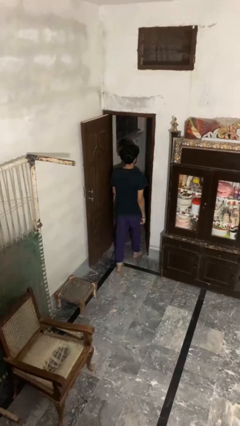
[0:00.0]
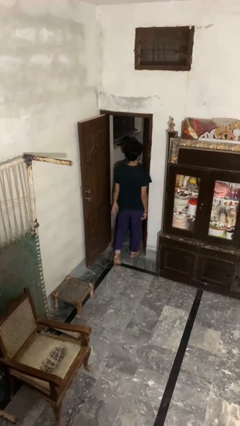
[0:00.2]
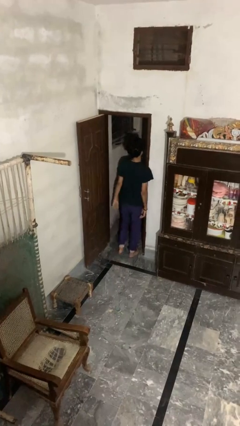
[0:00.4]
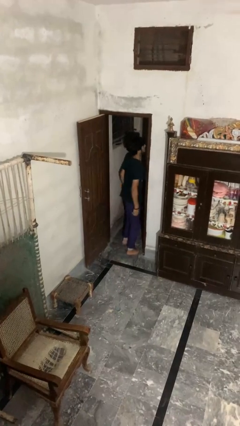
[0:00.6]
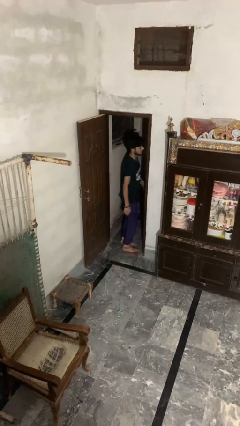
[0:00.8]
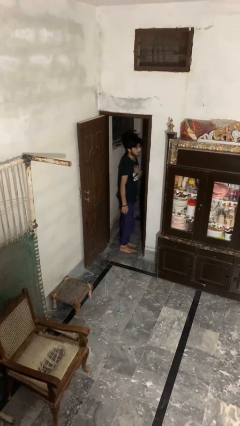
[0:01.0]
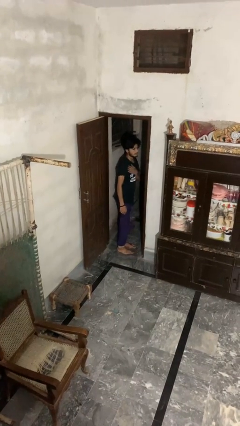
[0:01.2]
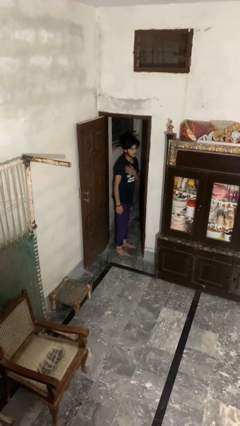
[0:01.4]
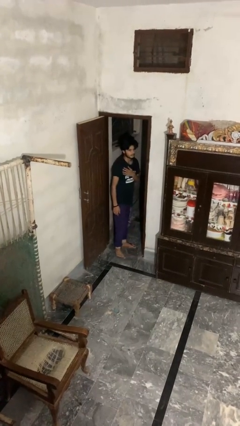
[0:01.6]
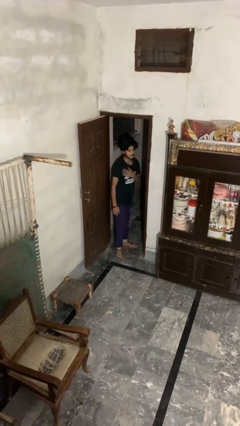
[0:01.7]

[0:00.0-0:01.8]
person bumps into wall

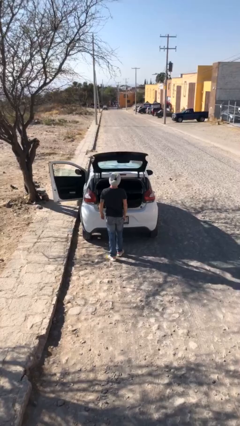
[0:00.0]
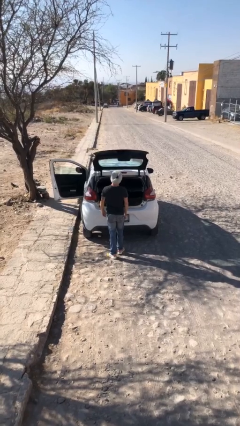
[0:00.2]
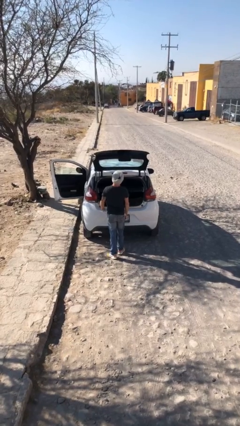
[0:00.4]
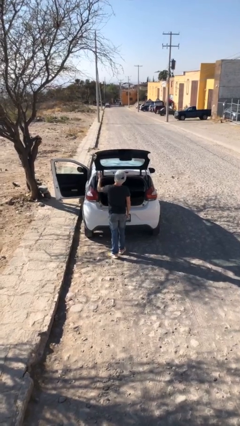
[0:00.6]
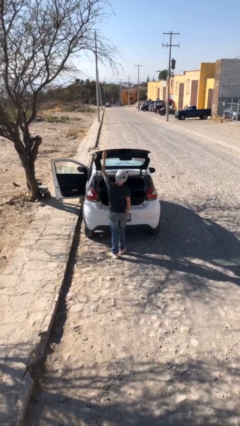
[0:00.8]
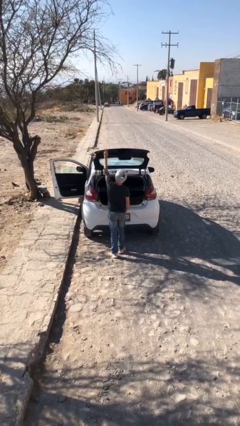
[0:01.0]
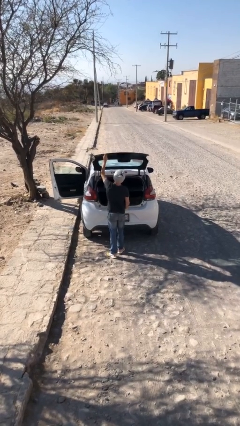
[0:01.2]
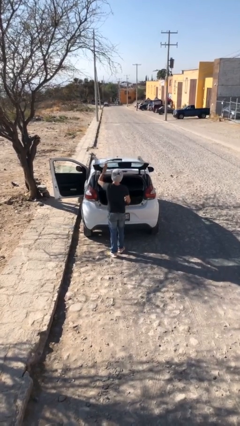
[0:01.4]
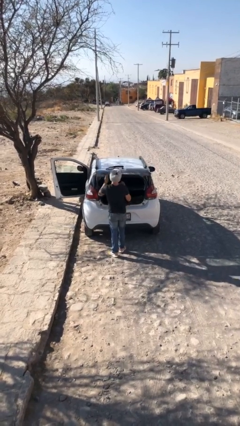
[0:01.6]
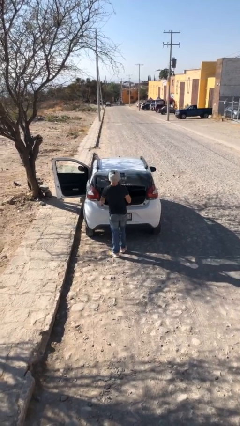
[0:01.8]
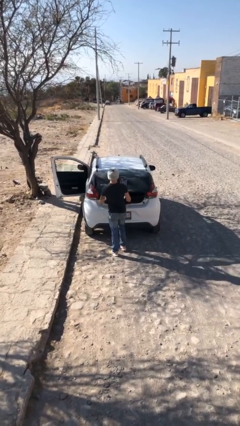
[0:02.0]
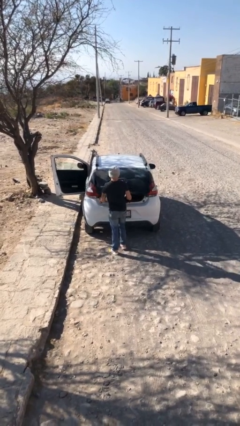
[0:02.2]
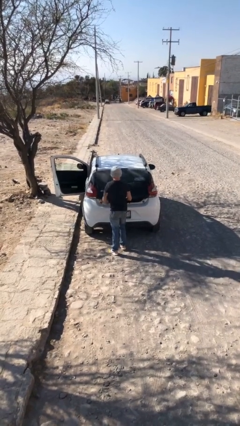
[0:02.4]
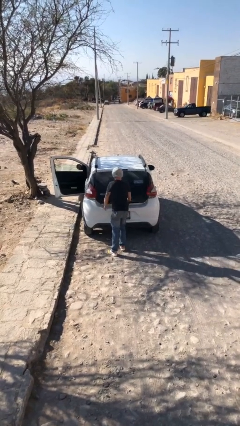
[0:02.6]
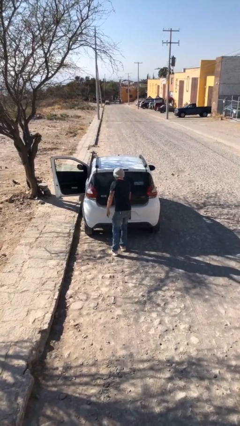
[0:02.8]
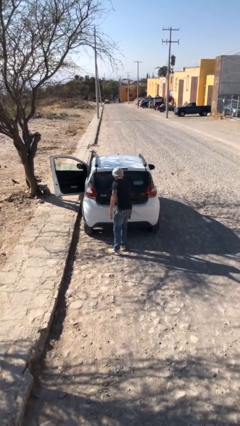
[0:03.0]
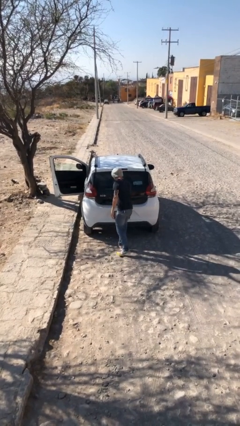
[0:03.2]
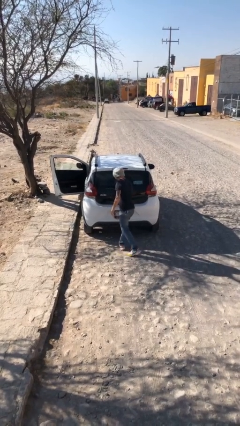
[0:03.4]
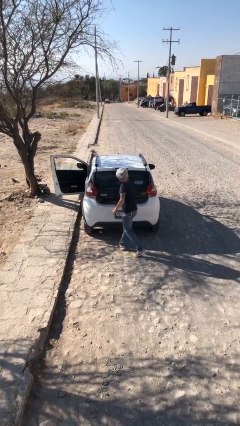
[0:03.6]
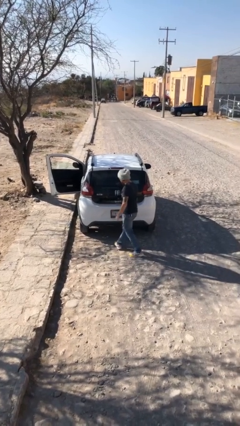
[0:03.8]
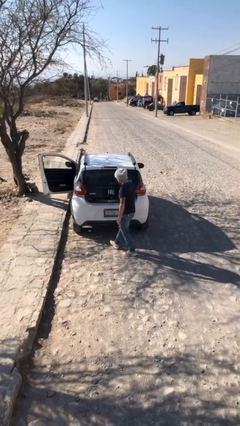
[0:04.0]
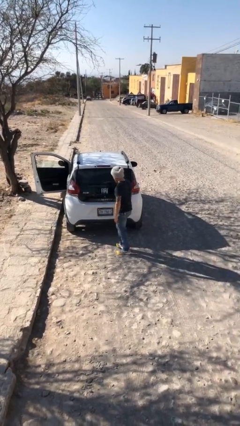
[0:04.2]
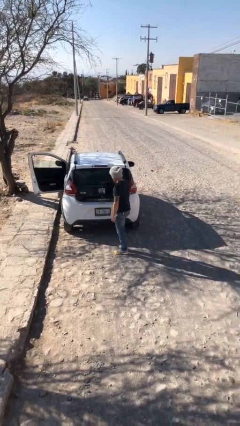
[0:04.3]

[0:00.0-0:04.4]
person closes car trunk

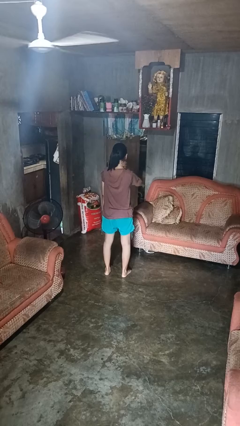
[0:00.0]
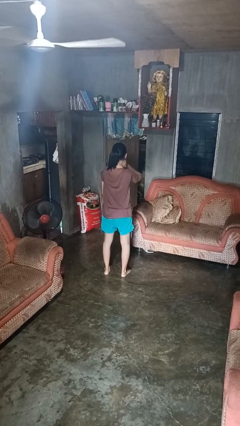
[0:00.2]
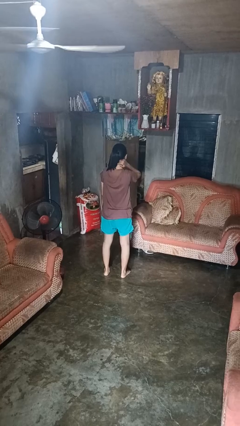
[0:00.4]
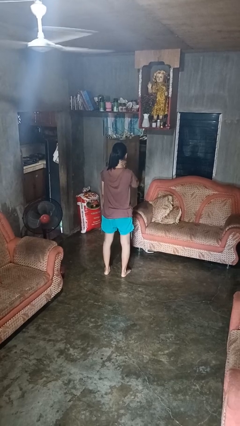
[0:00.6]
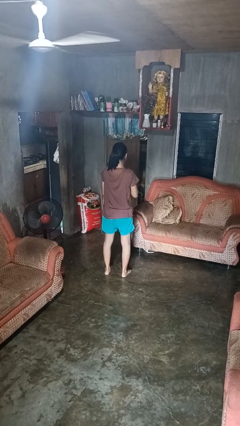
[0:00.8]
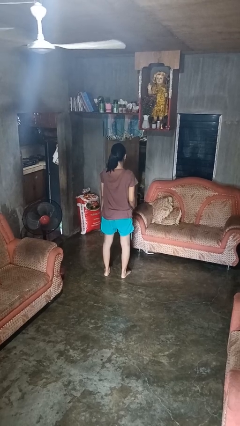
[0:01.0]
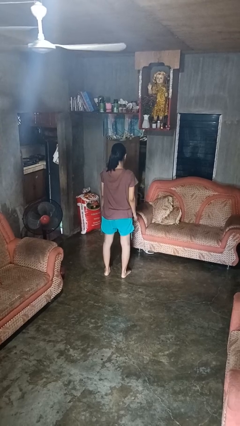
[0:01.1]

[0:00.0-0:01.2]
person rubs neck

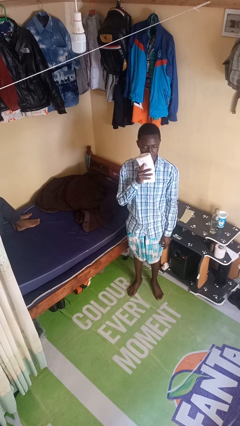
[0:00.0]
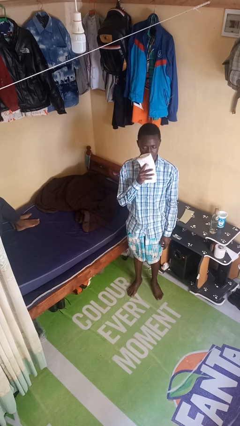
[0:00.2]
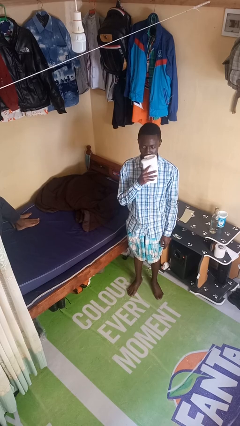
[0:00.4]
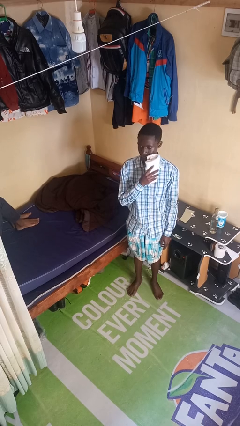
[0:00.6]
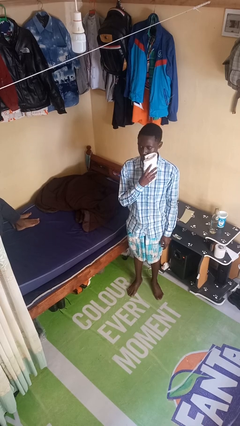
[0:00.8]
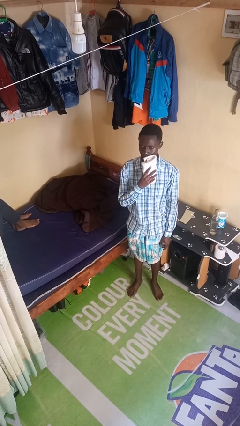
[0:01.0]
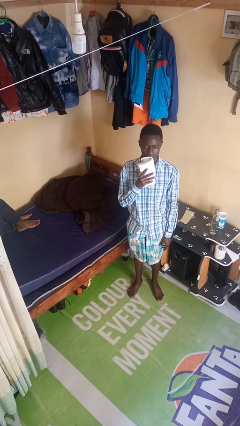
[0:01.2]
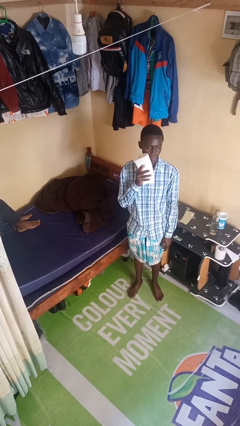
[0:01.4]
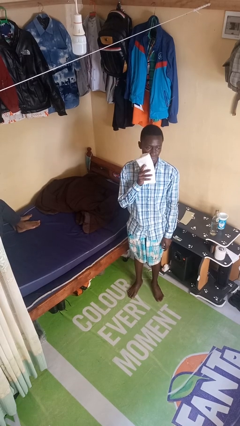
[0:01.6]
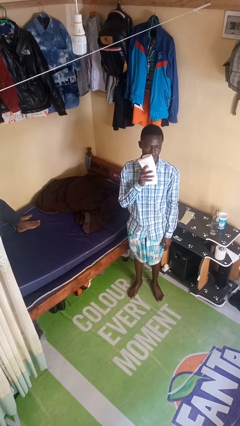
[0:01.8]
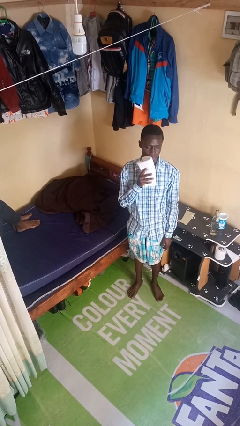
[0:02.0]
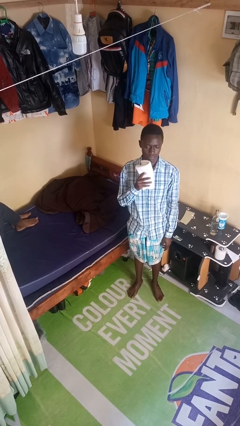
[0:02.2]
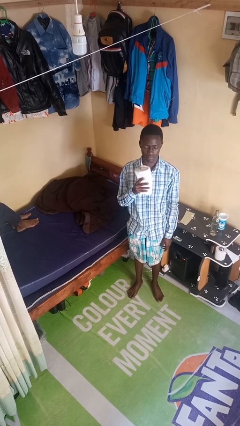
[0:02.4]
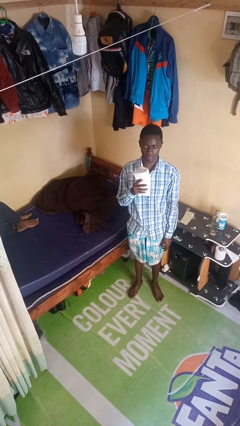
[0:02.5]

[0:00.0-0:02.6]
person wipes mouth with napkin

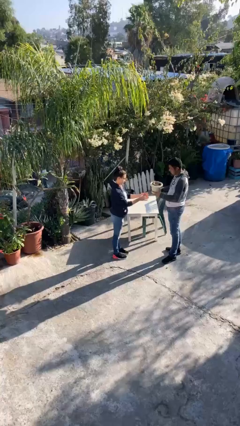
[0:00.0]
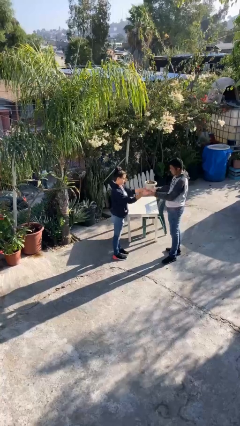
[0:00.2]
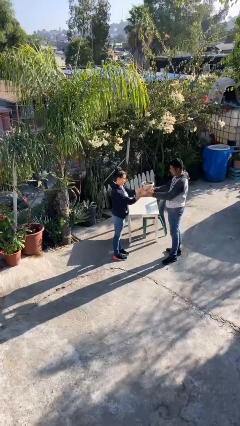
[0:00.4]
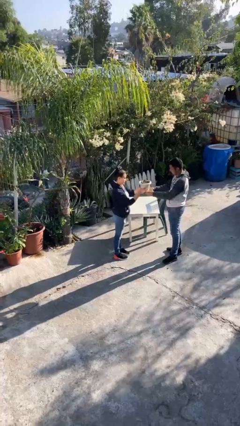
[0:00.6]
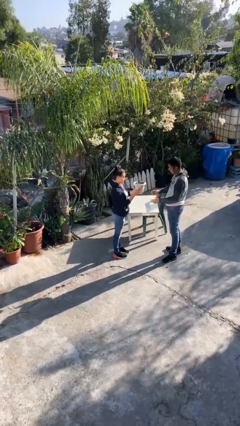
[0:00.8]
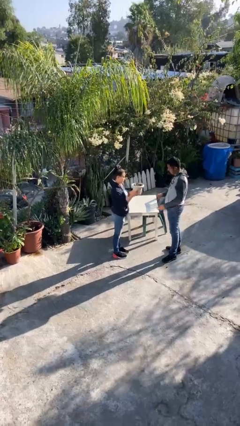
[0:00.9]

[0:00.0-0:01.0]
person transfers object to person

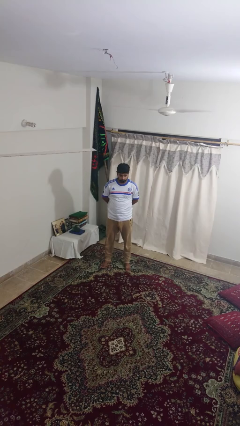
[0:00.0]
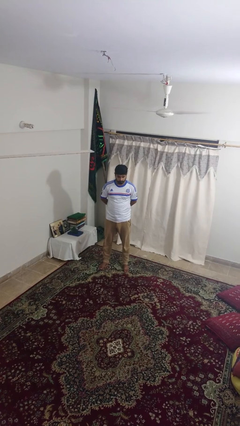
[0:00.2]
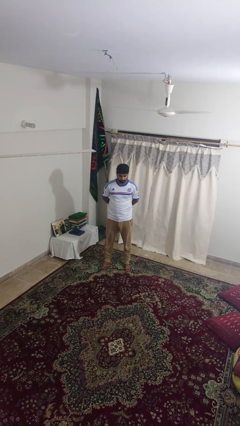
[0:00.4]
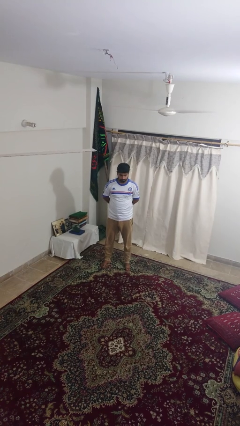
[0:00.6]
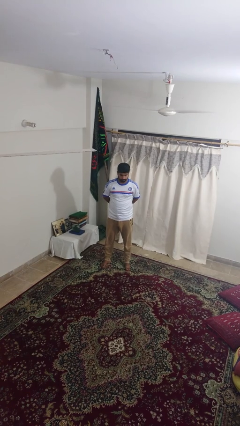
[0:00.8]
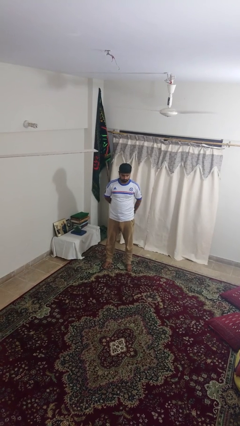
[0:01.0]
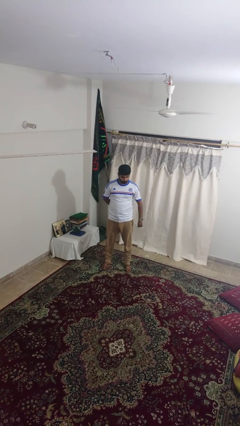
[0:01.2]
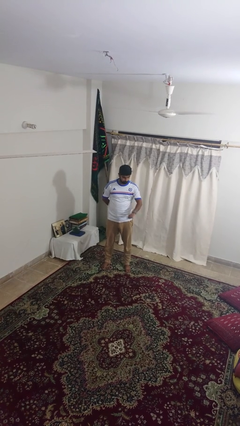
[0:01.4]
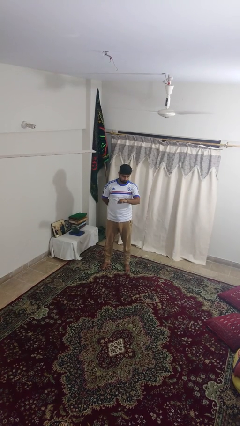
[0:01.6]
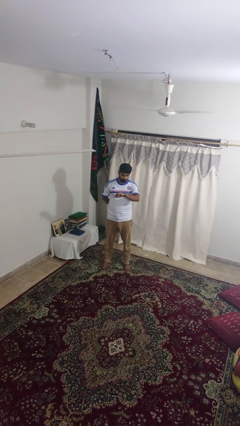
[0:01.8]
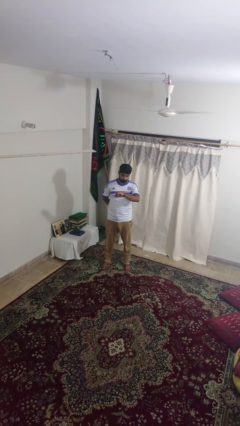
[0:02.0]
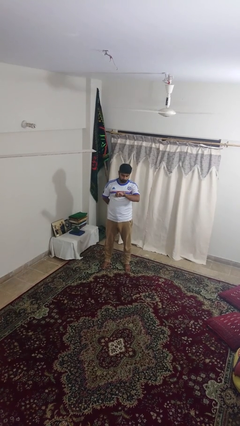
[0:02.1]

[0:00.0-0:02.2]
person looks at wristwatch

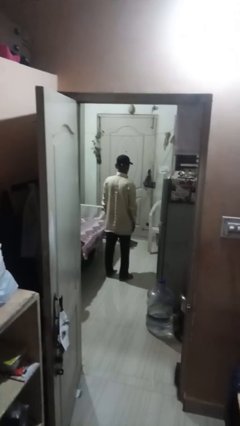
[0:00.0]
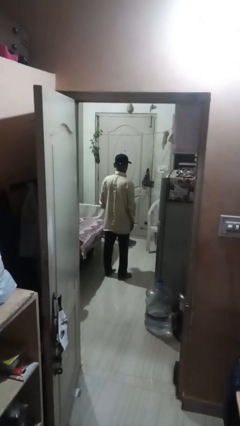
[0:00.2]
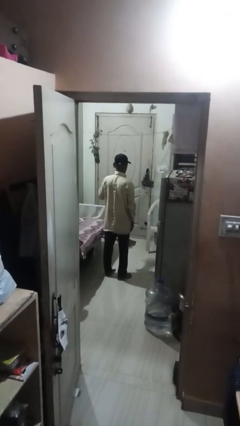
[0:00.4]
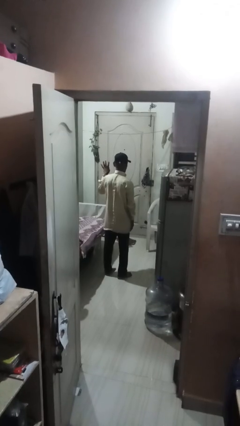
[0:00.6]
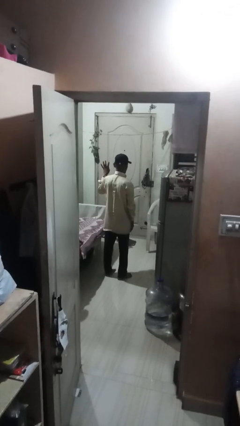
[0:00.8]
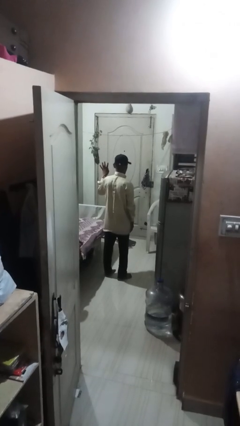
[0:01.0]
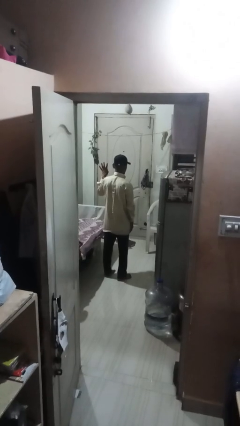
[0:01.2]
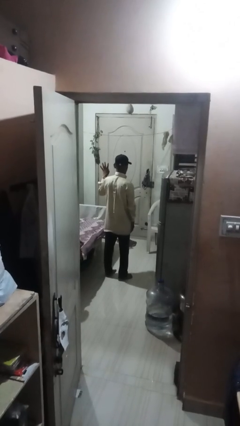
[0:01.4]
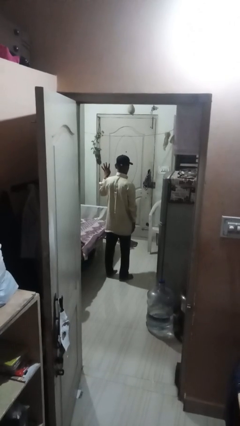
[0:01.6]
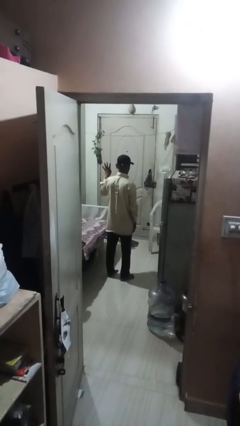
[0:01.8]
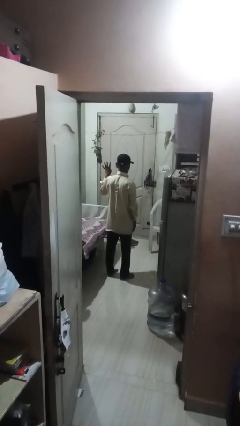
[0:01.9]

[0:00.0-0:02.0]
person gestures number four

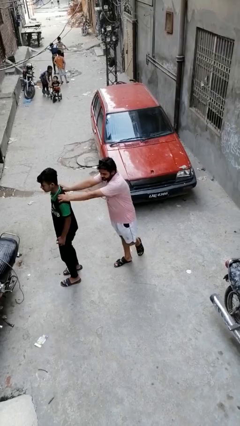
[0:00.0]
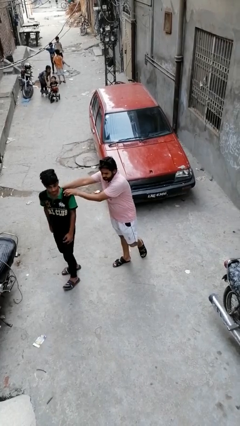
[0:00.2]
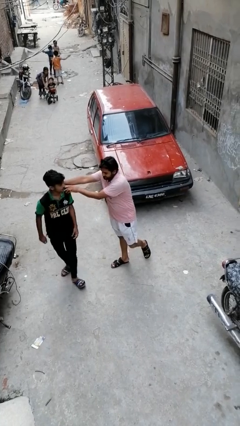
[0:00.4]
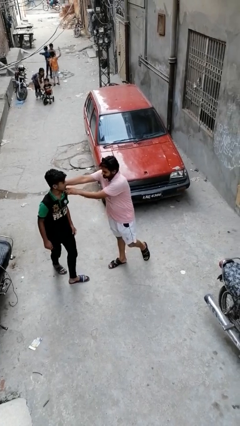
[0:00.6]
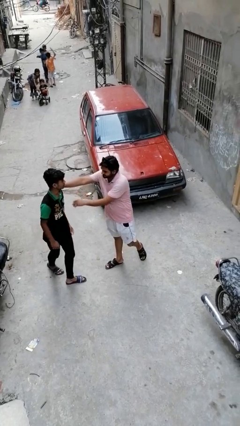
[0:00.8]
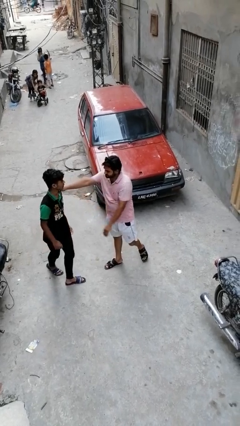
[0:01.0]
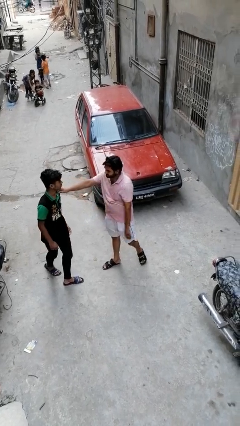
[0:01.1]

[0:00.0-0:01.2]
person spins person around

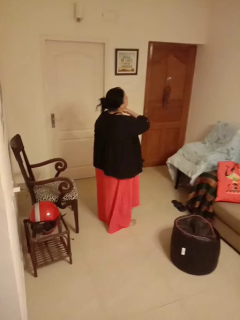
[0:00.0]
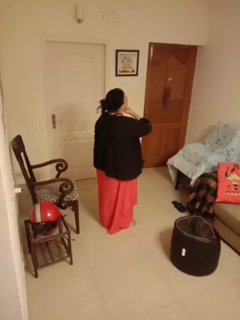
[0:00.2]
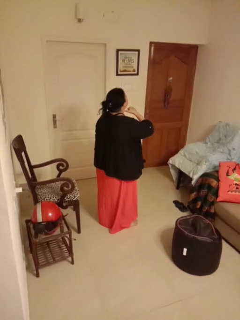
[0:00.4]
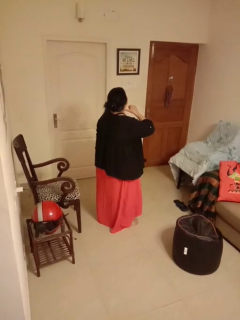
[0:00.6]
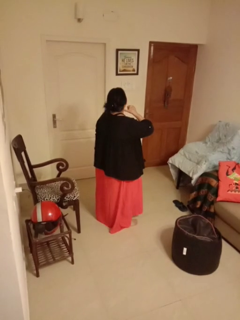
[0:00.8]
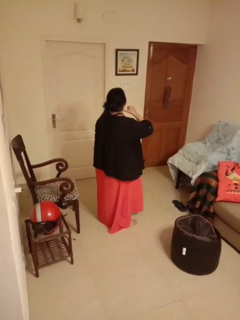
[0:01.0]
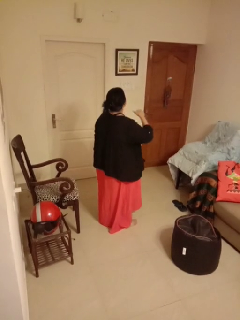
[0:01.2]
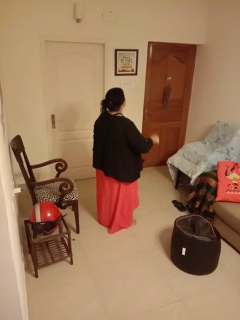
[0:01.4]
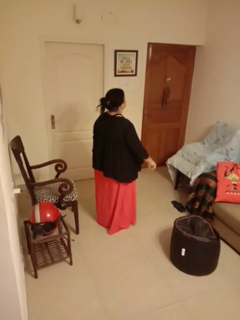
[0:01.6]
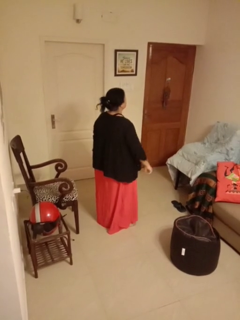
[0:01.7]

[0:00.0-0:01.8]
person gestures cut
